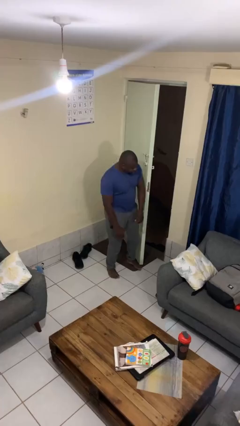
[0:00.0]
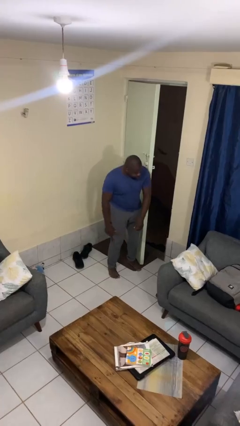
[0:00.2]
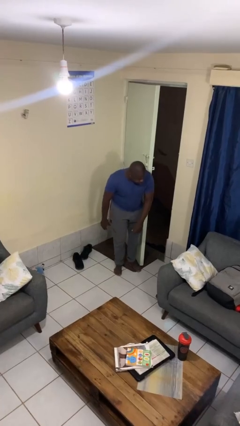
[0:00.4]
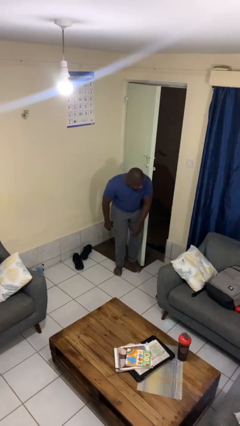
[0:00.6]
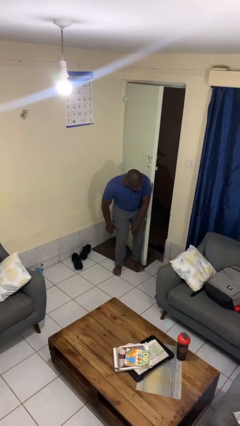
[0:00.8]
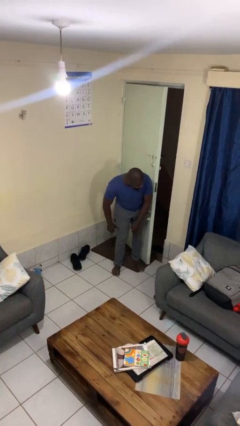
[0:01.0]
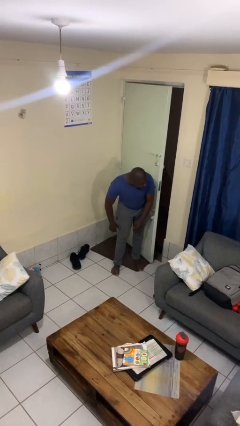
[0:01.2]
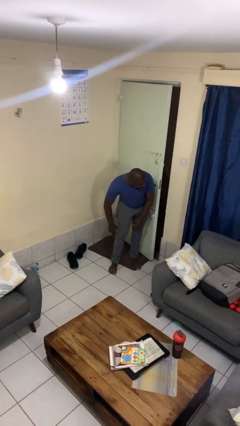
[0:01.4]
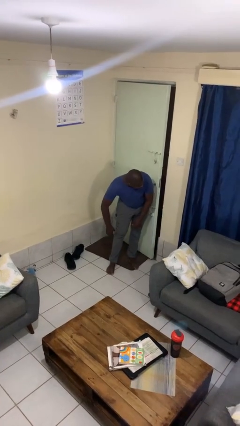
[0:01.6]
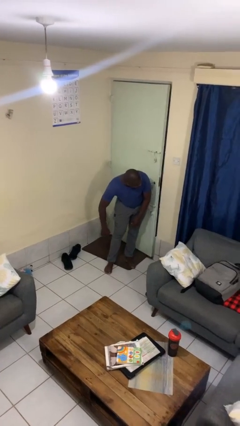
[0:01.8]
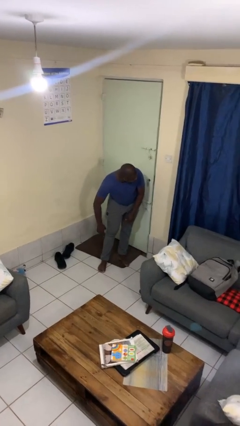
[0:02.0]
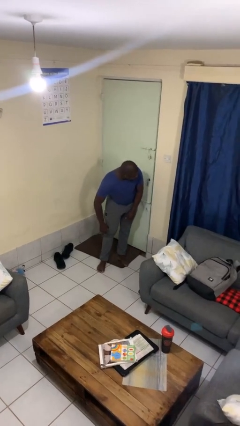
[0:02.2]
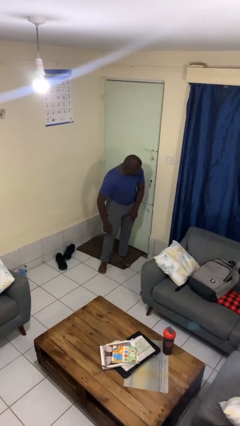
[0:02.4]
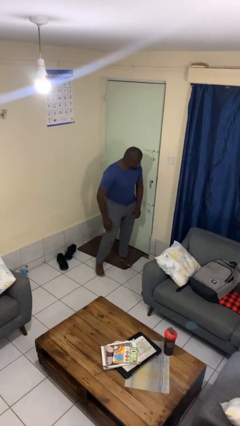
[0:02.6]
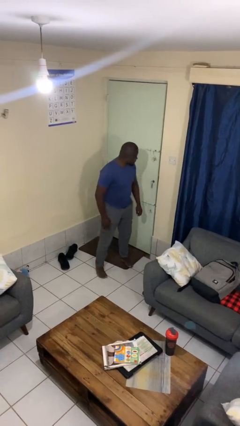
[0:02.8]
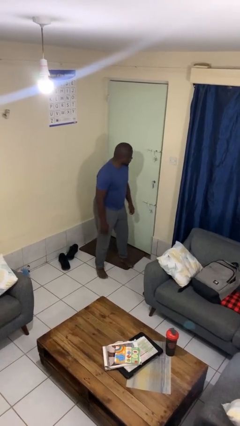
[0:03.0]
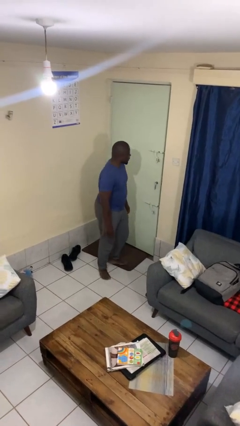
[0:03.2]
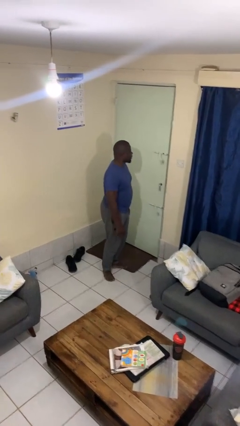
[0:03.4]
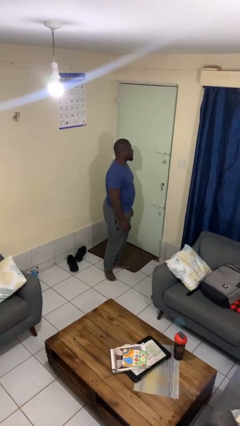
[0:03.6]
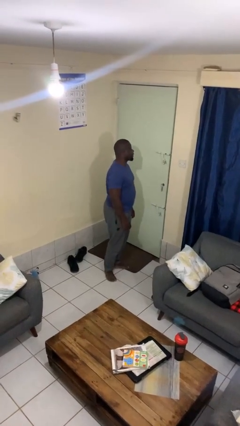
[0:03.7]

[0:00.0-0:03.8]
person closes door with hip

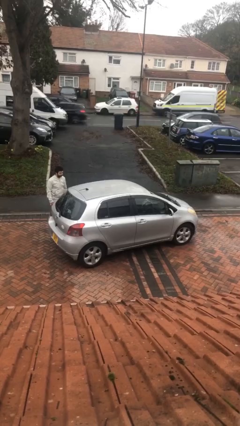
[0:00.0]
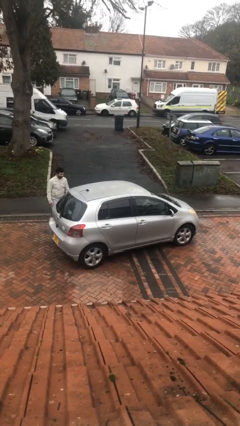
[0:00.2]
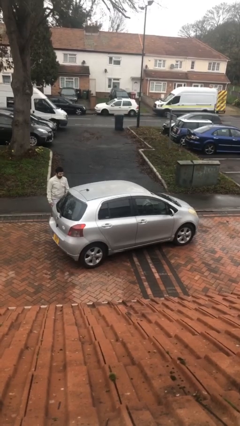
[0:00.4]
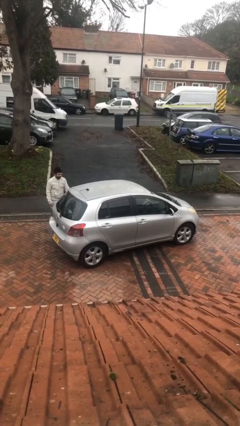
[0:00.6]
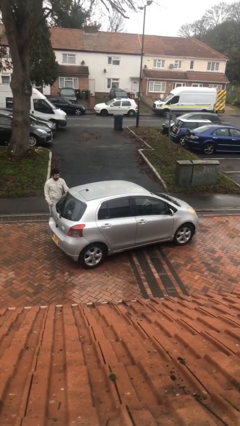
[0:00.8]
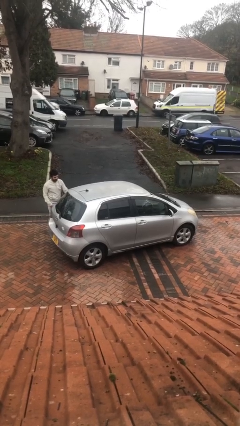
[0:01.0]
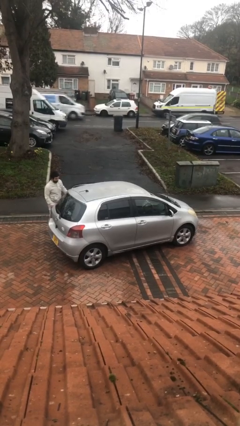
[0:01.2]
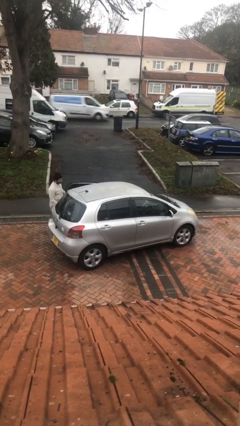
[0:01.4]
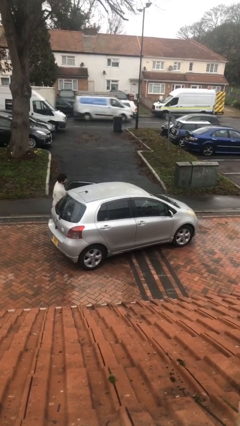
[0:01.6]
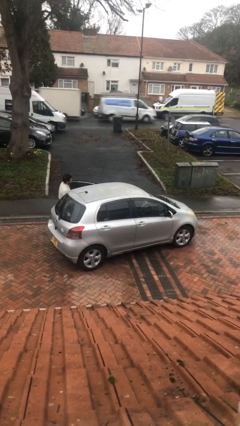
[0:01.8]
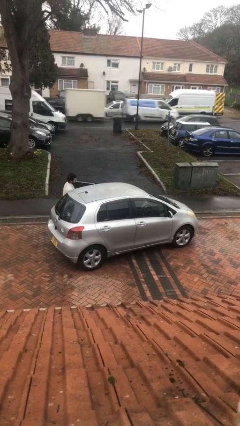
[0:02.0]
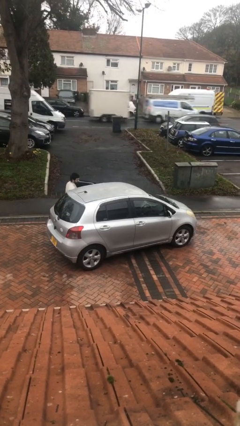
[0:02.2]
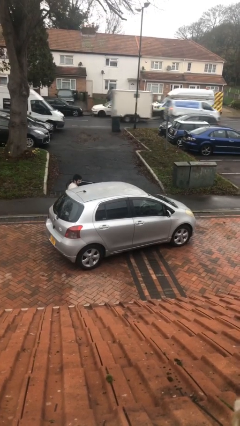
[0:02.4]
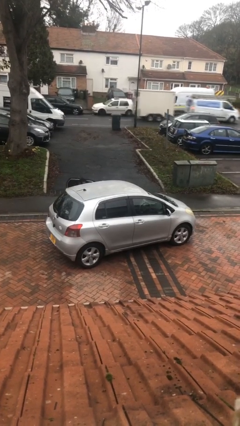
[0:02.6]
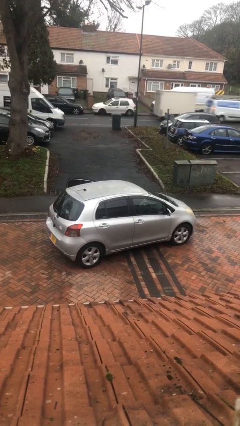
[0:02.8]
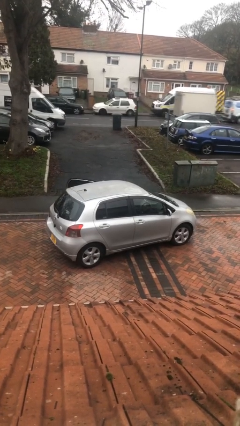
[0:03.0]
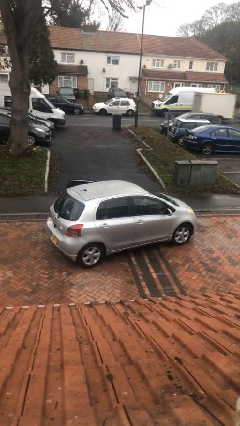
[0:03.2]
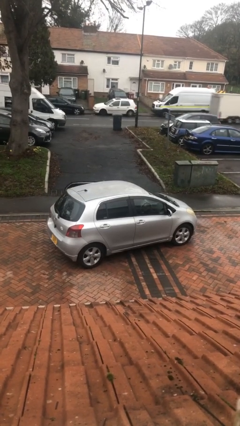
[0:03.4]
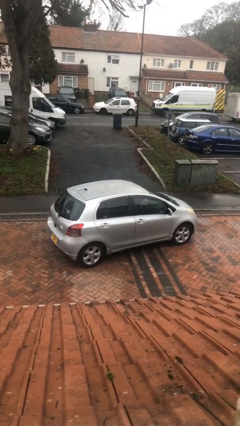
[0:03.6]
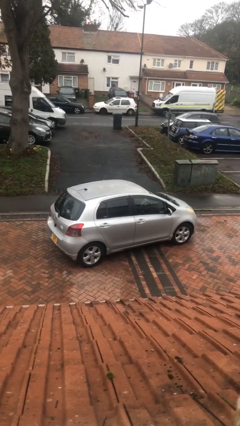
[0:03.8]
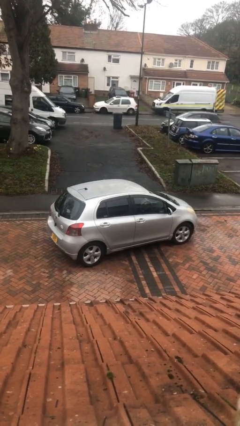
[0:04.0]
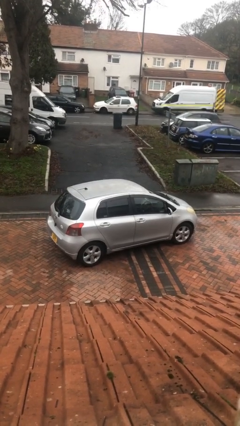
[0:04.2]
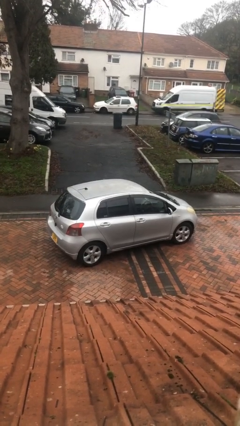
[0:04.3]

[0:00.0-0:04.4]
car picks up person

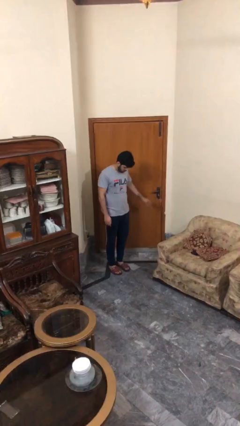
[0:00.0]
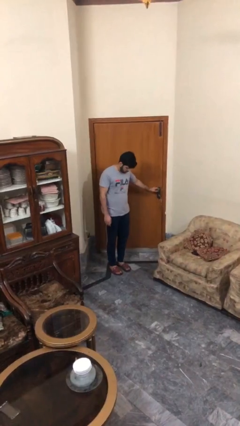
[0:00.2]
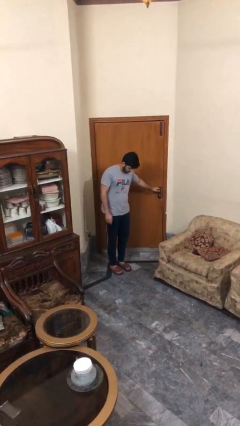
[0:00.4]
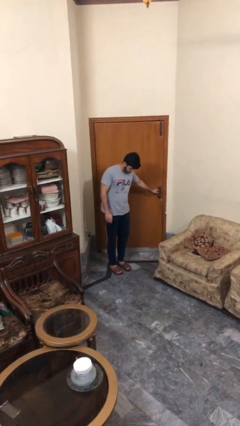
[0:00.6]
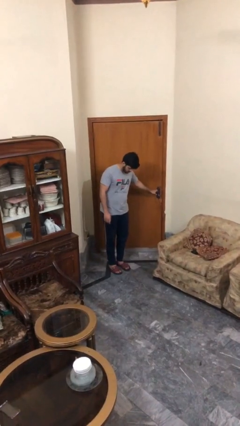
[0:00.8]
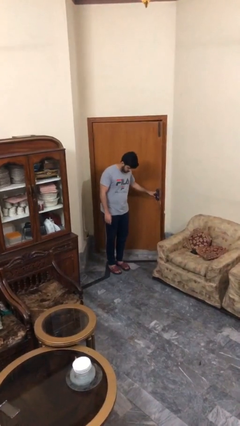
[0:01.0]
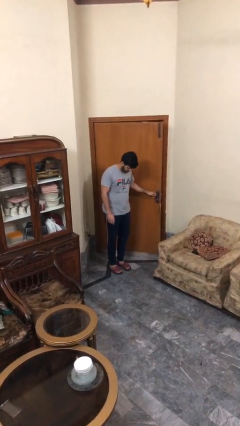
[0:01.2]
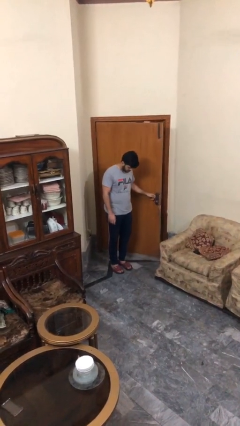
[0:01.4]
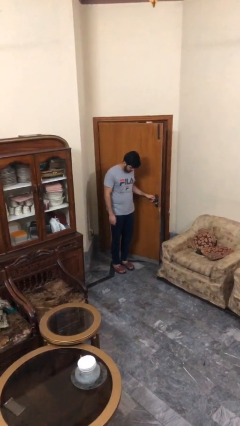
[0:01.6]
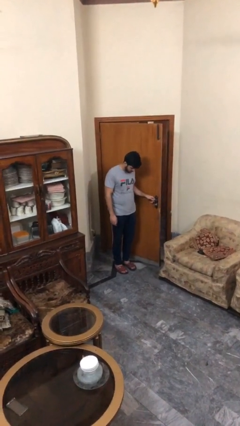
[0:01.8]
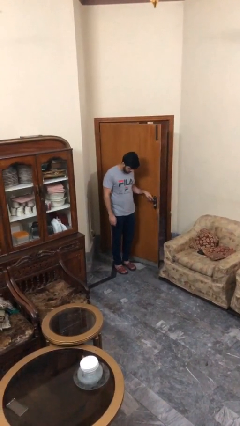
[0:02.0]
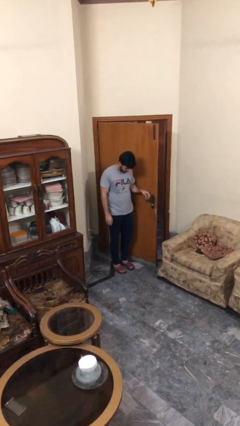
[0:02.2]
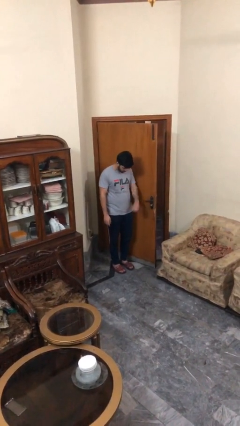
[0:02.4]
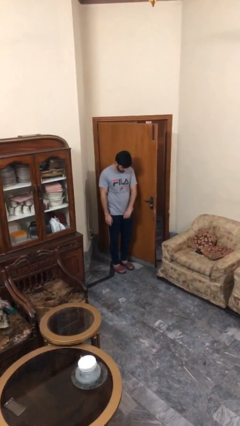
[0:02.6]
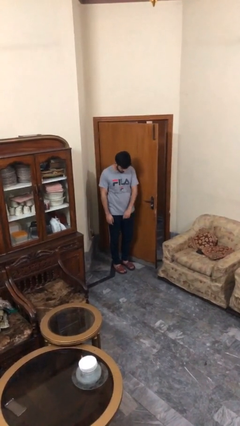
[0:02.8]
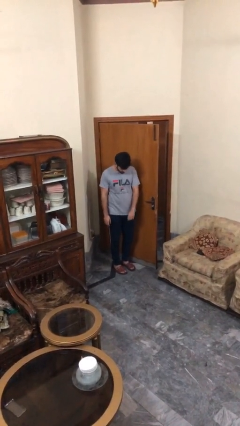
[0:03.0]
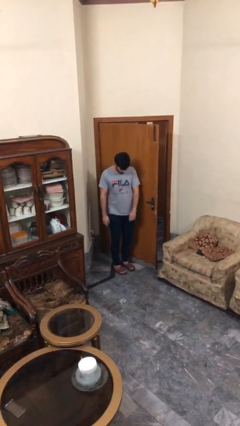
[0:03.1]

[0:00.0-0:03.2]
person opens facility door

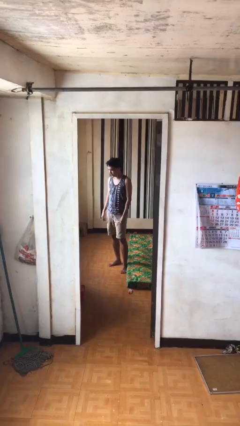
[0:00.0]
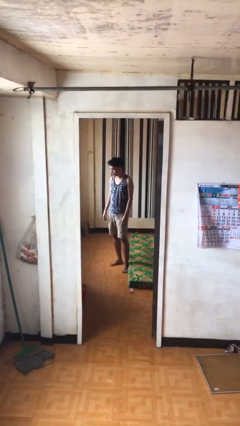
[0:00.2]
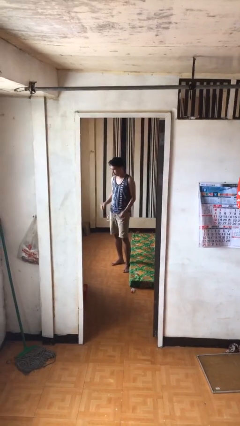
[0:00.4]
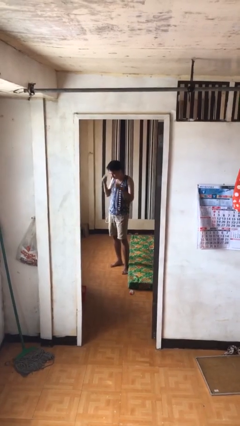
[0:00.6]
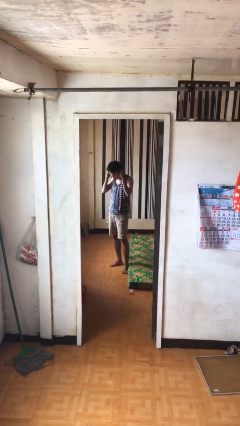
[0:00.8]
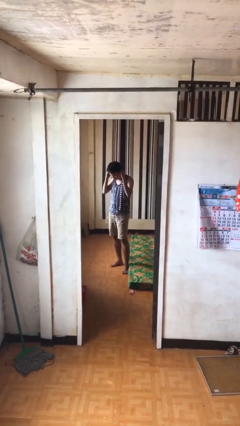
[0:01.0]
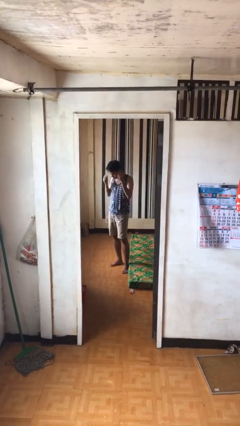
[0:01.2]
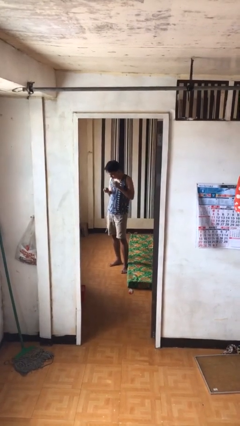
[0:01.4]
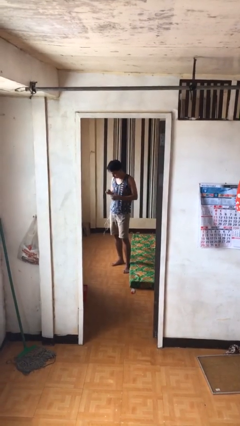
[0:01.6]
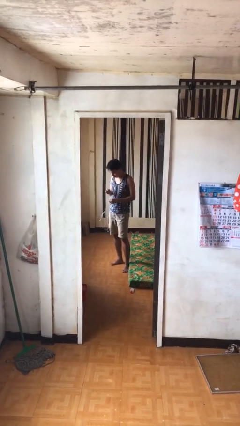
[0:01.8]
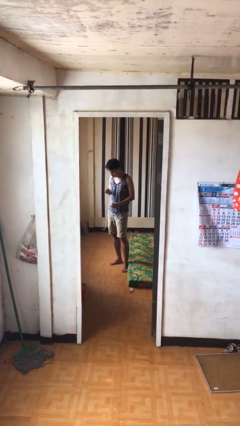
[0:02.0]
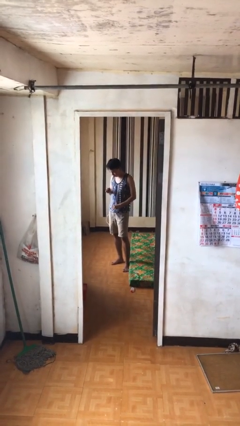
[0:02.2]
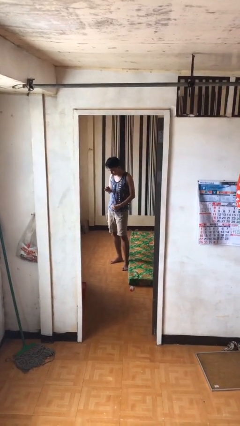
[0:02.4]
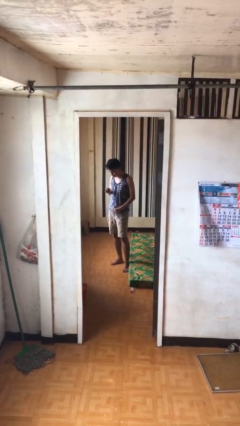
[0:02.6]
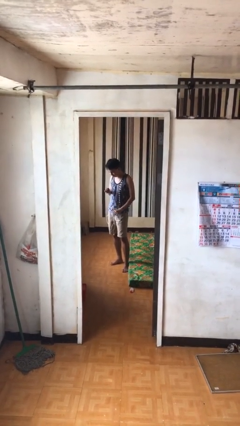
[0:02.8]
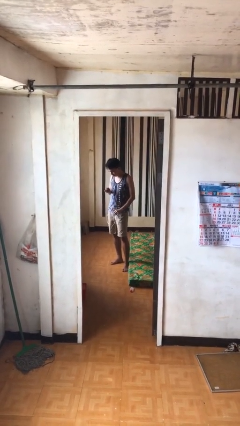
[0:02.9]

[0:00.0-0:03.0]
person takes off headphones

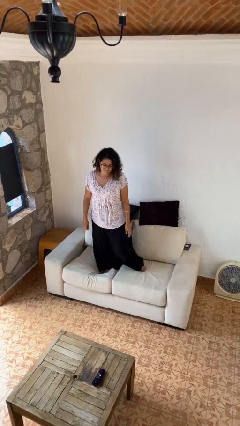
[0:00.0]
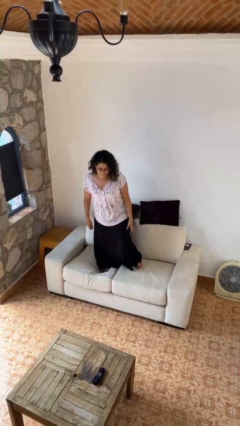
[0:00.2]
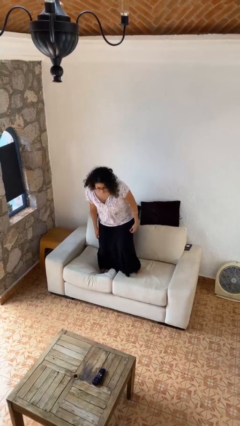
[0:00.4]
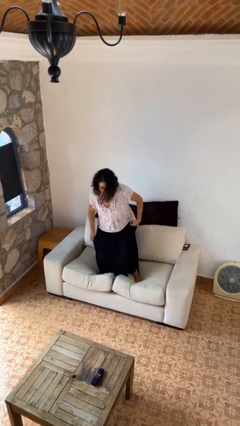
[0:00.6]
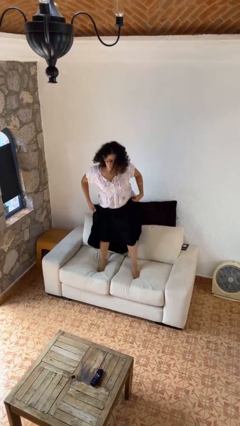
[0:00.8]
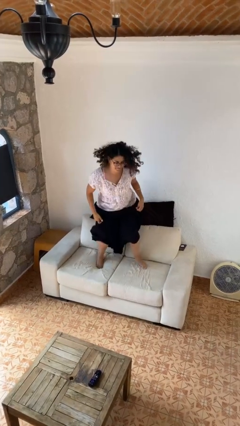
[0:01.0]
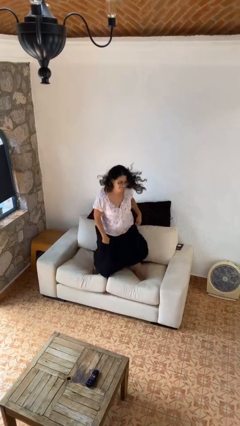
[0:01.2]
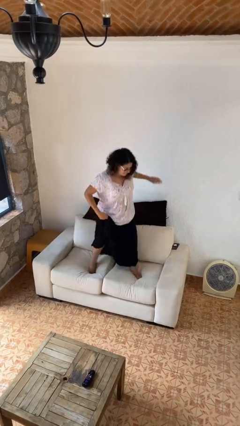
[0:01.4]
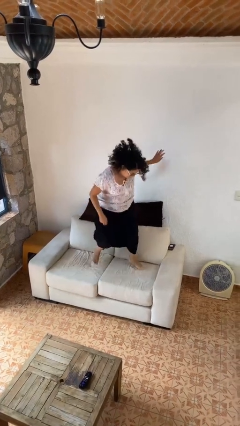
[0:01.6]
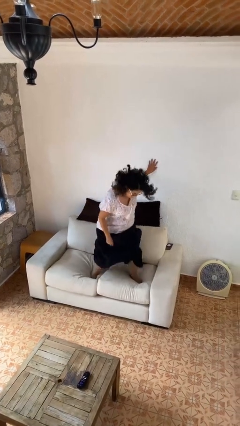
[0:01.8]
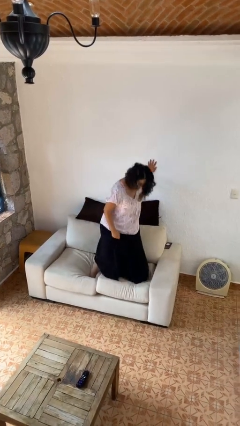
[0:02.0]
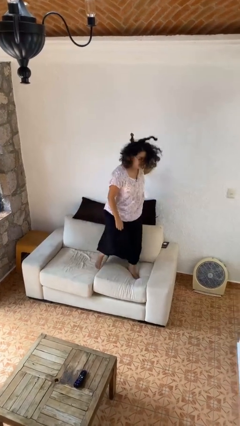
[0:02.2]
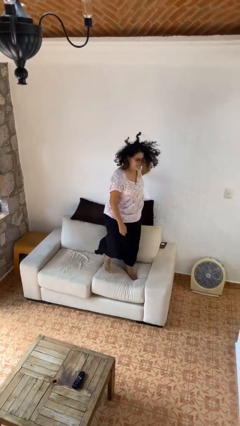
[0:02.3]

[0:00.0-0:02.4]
person jumps on couch

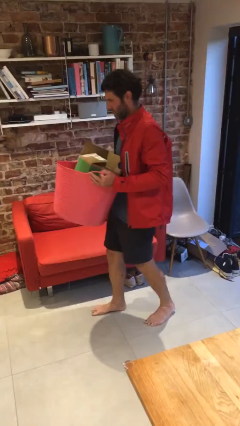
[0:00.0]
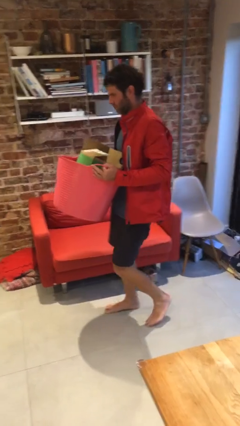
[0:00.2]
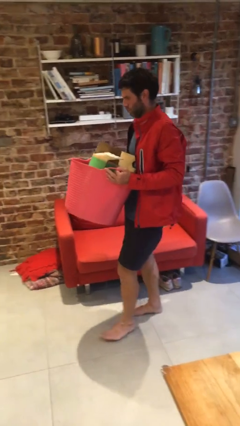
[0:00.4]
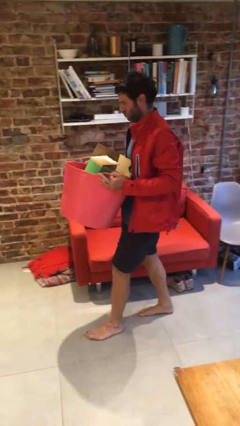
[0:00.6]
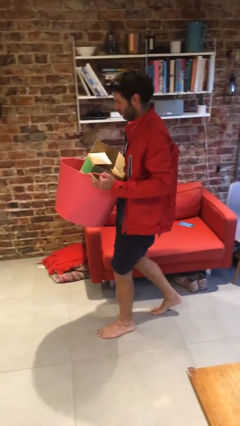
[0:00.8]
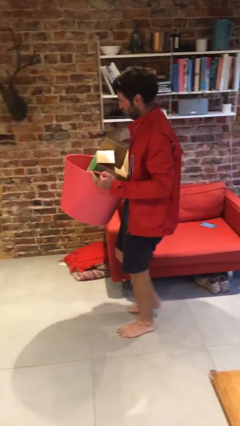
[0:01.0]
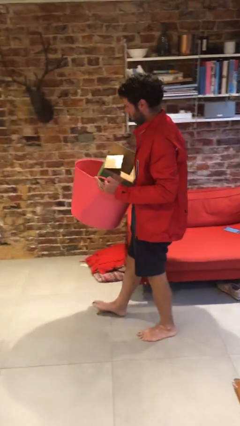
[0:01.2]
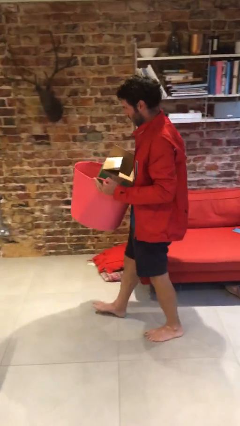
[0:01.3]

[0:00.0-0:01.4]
person carries heavy object
